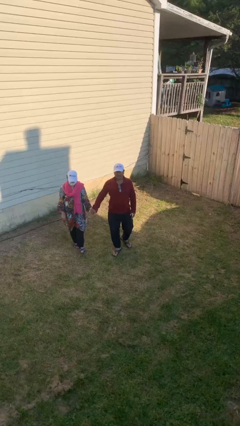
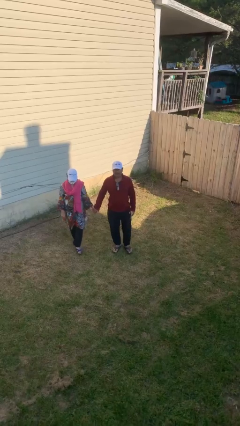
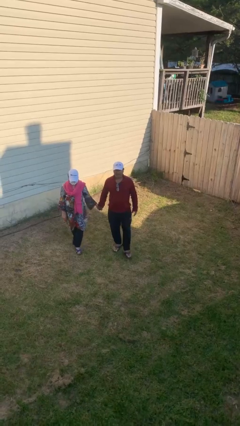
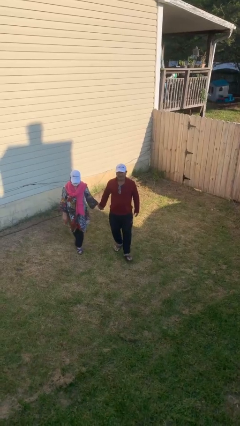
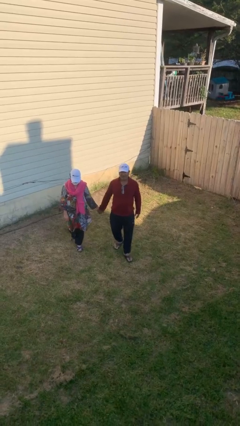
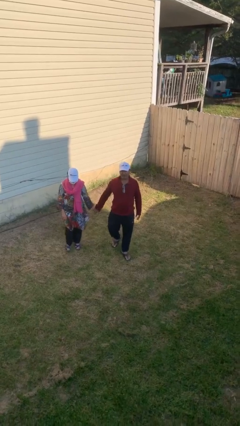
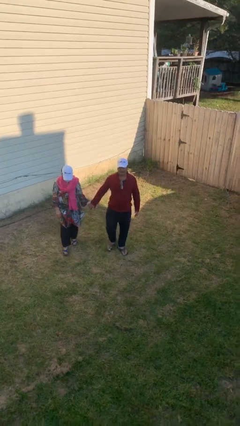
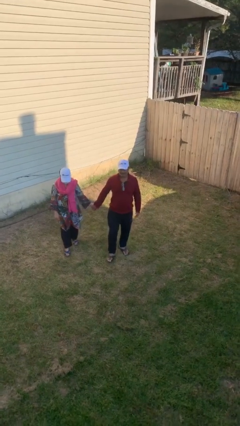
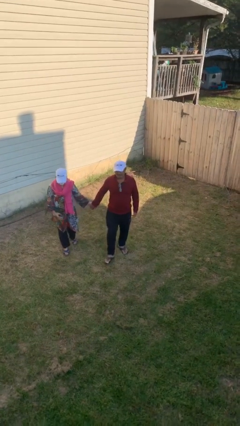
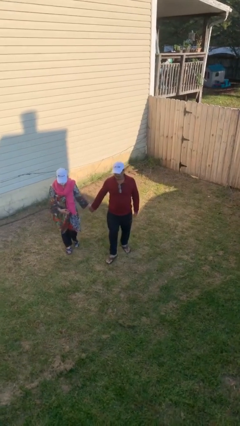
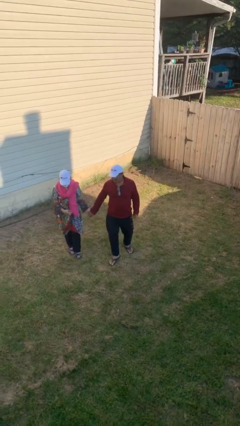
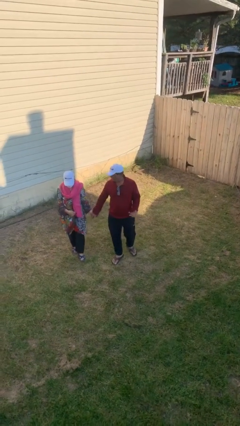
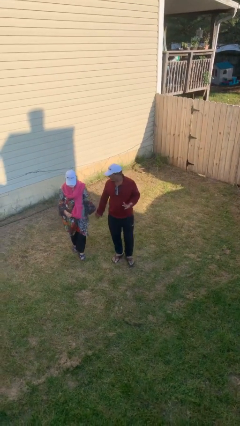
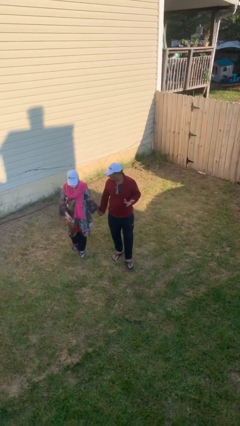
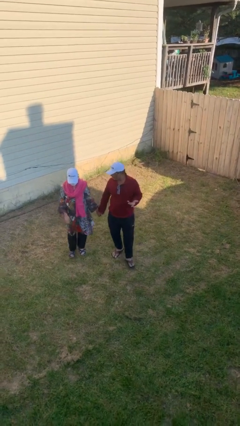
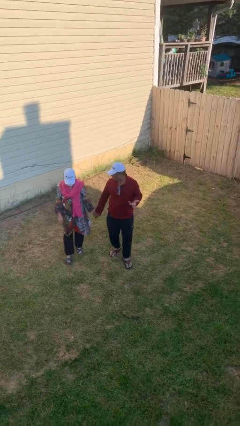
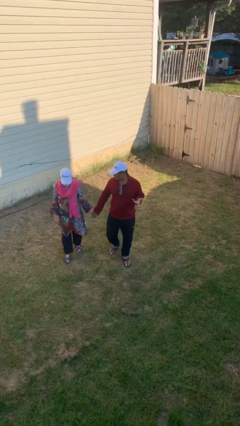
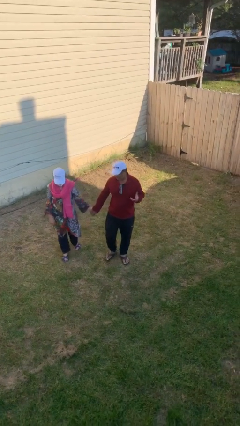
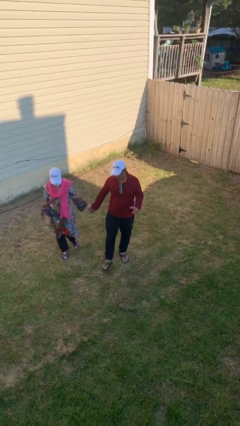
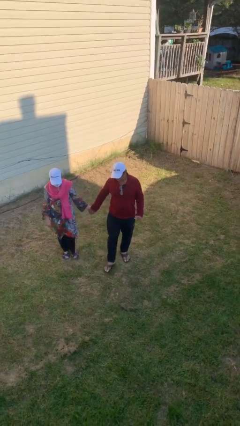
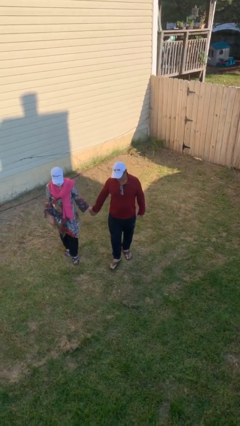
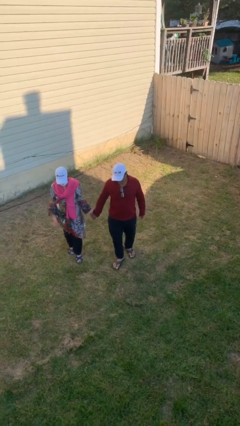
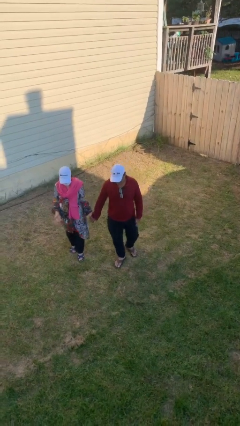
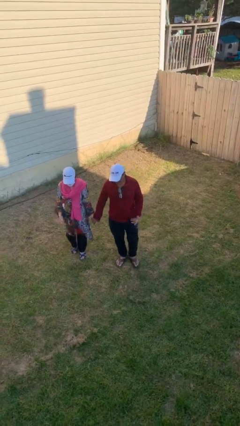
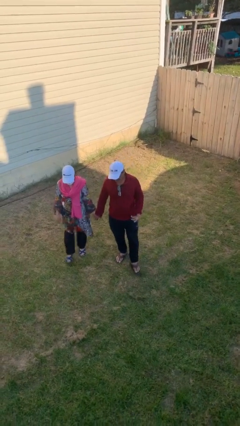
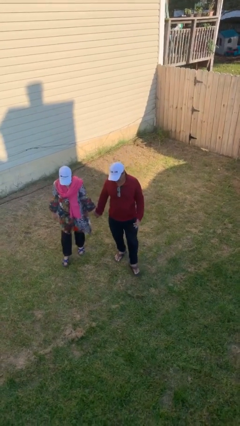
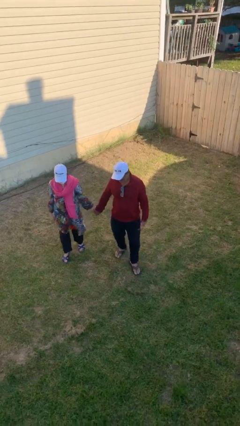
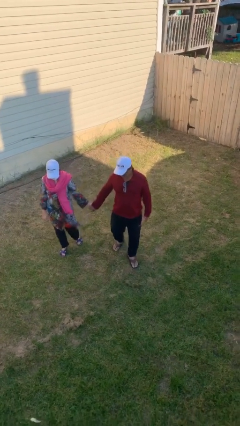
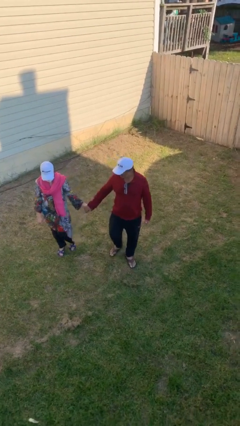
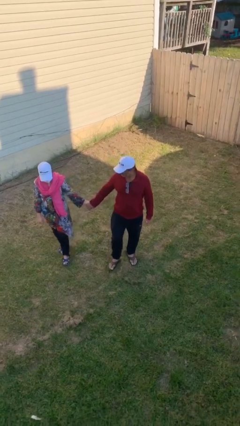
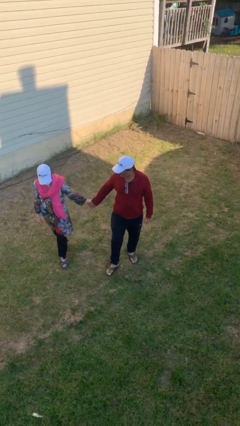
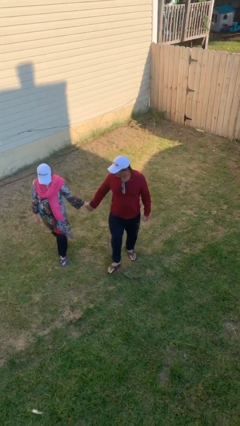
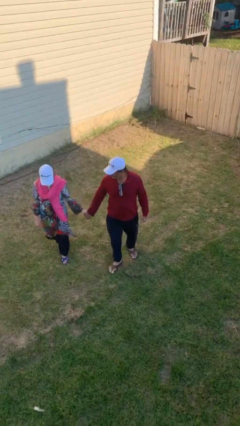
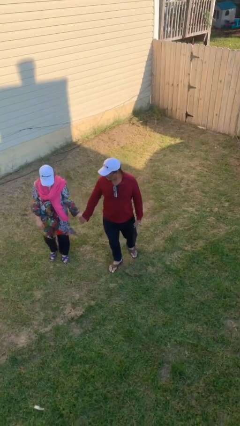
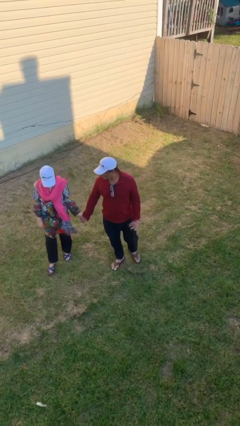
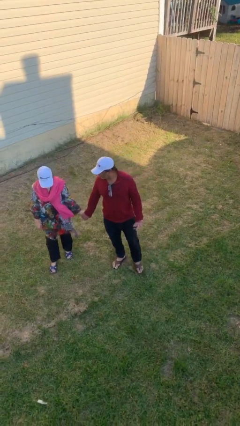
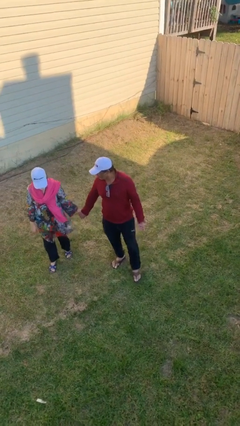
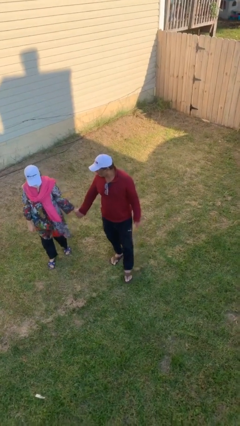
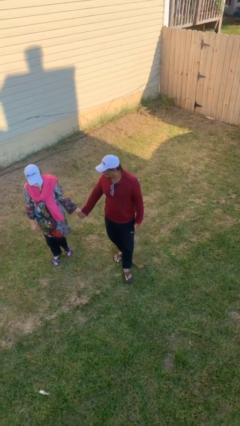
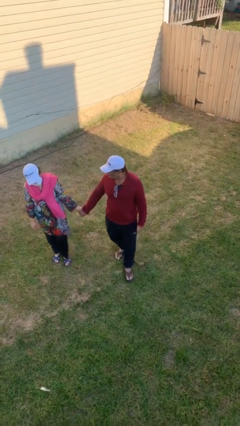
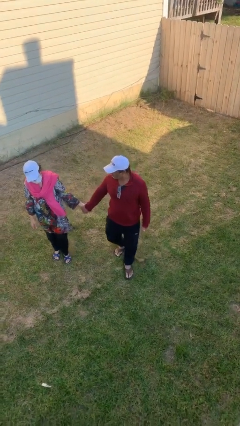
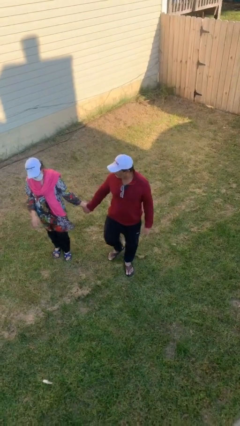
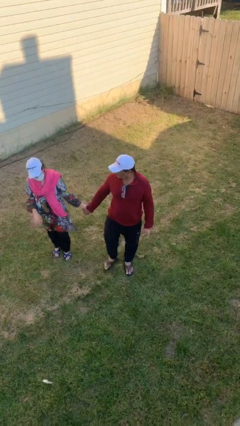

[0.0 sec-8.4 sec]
person holds hand

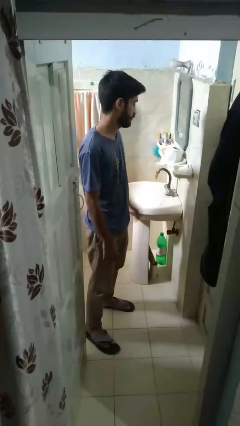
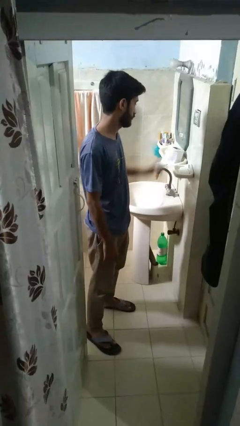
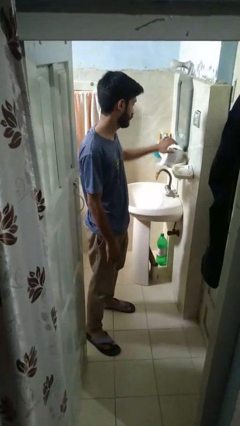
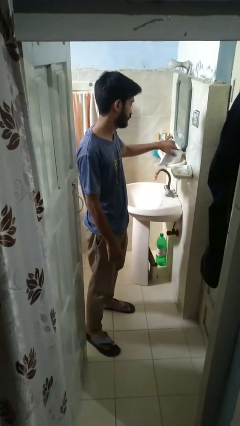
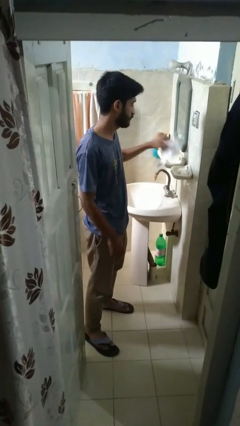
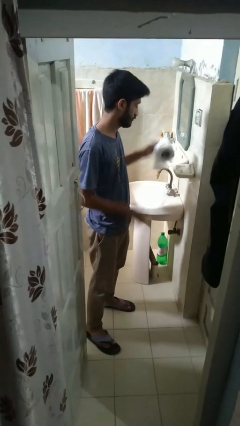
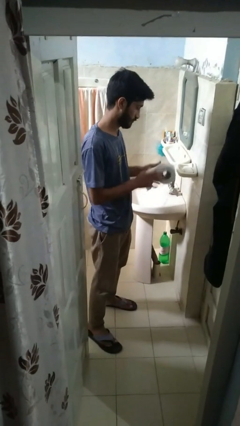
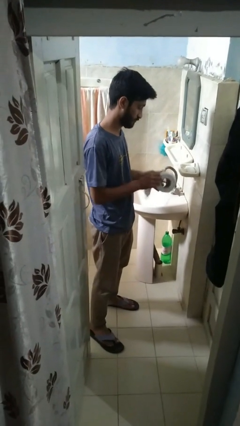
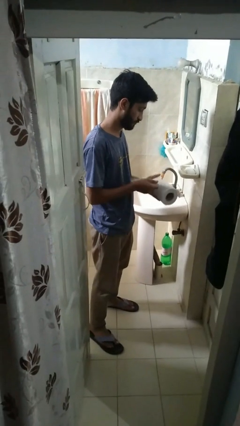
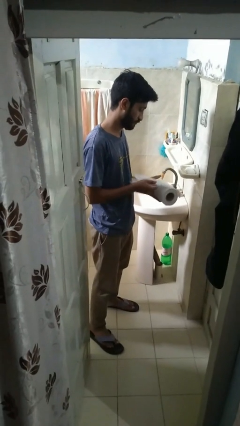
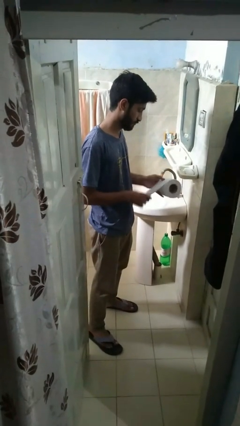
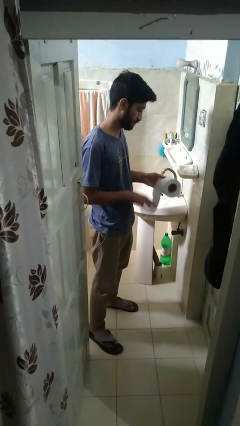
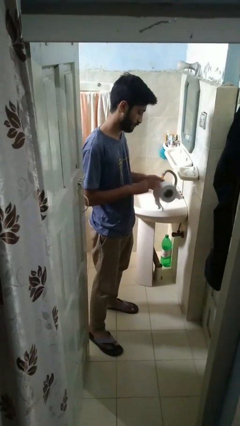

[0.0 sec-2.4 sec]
person picks up object from countertop

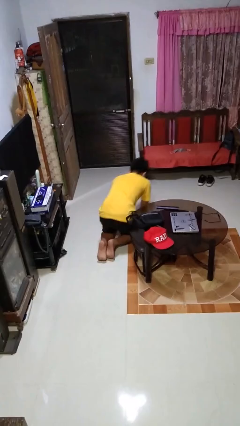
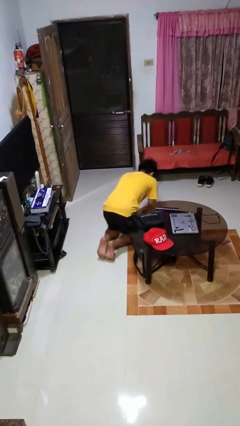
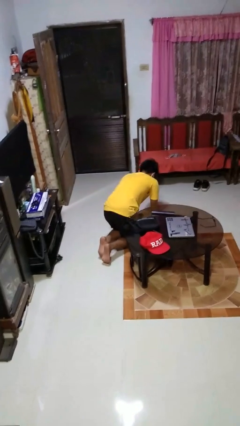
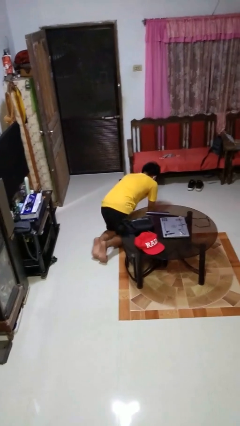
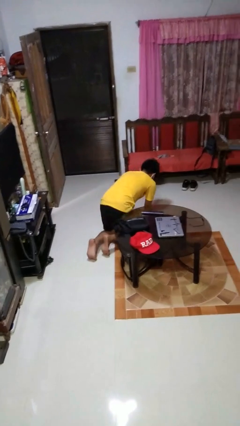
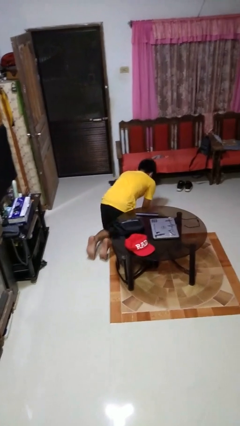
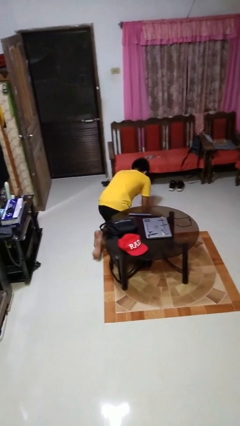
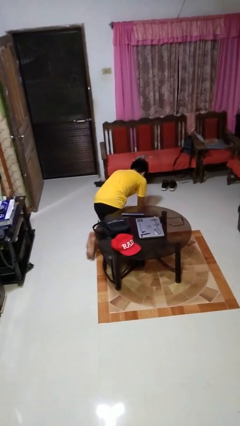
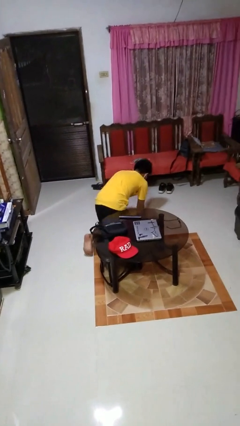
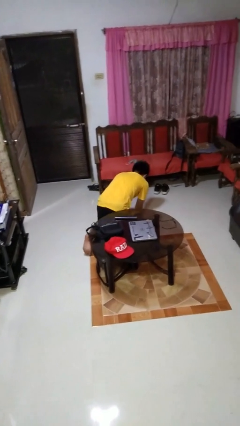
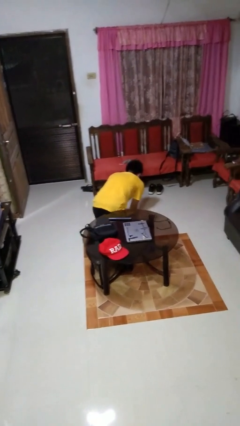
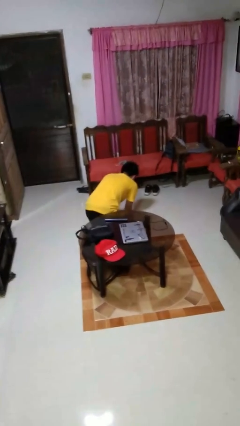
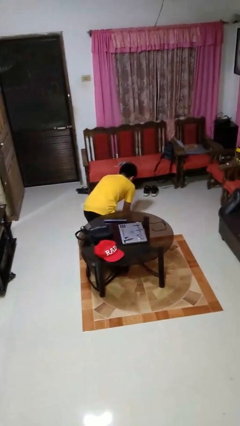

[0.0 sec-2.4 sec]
person crawls

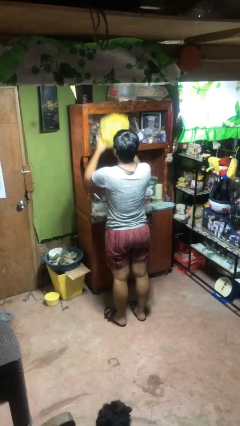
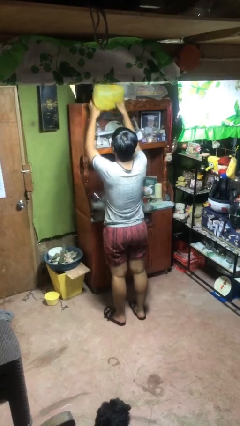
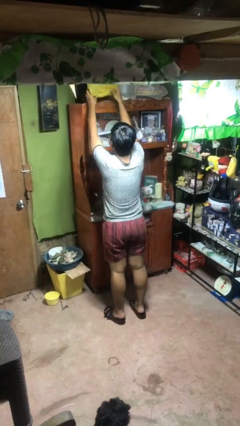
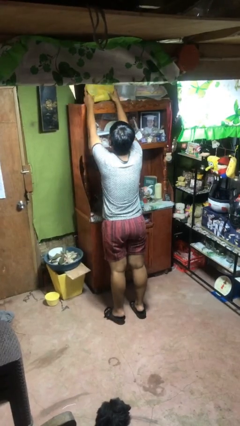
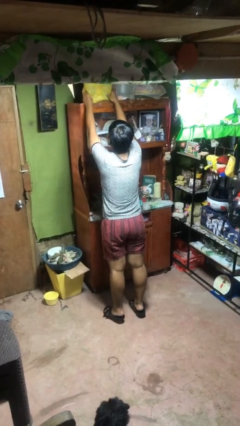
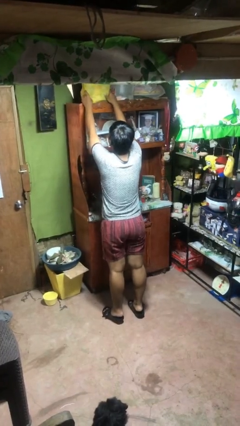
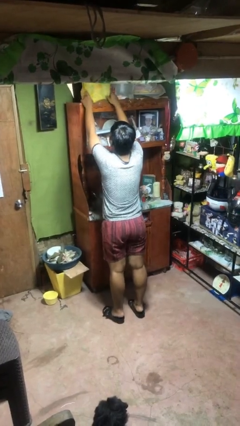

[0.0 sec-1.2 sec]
person puts down object on shelf

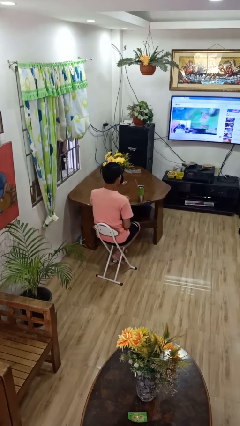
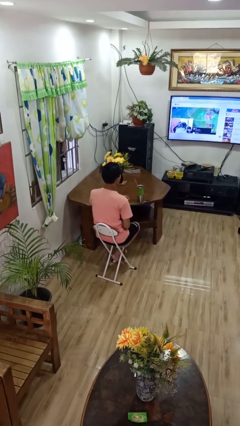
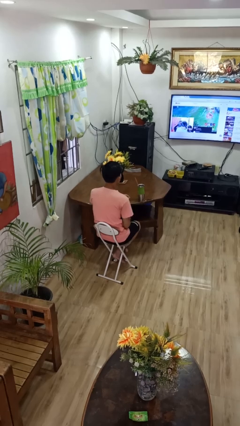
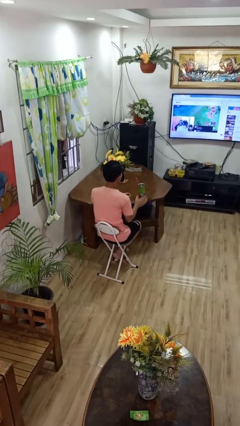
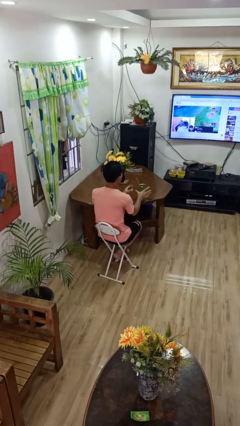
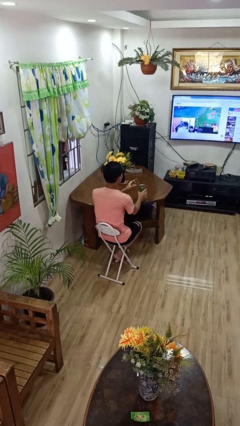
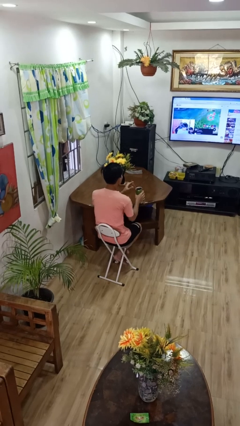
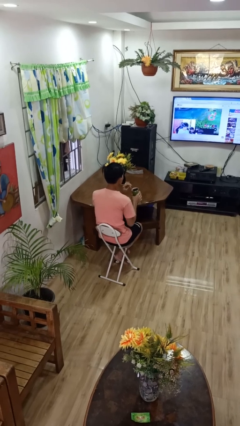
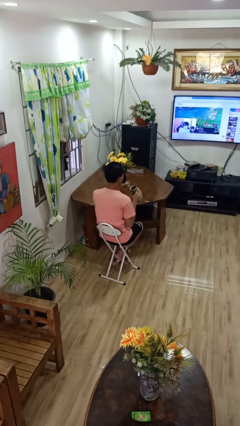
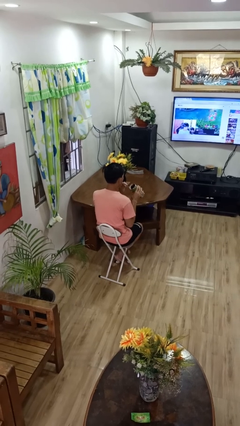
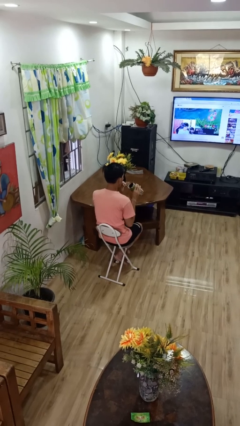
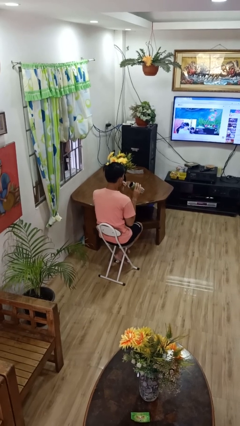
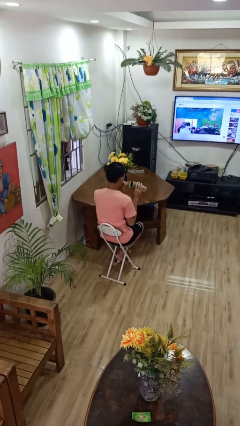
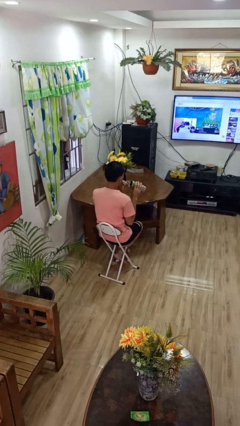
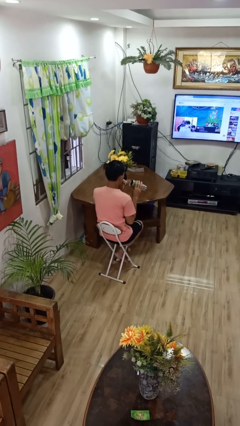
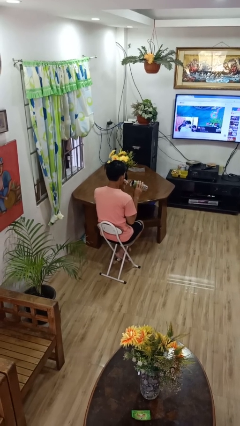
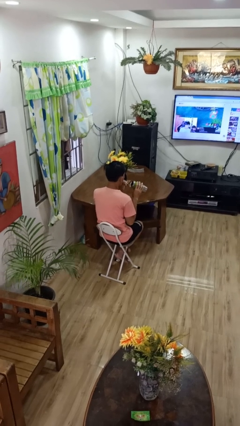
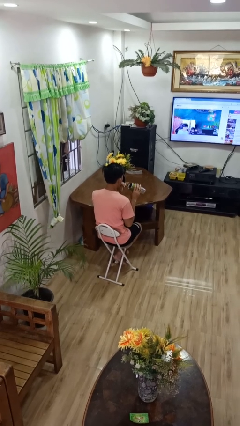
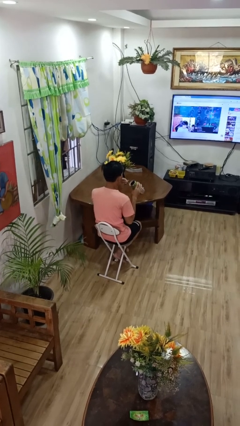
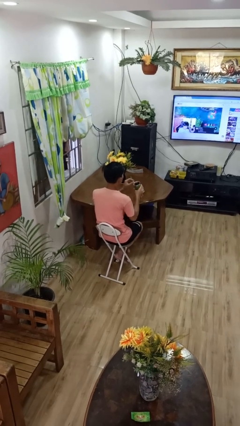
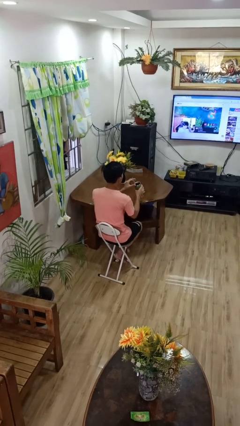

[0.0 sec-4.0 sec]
person drinks from straw
